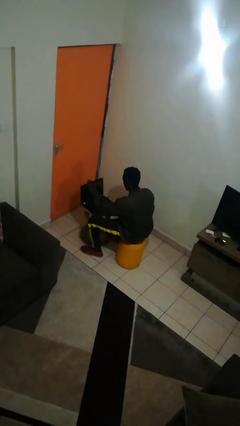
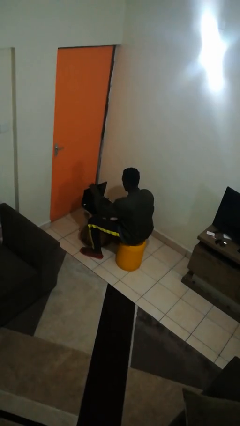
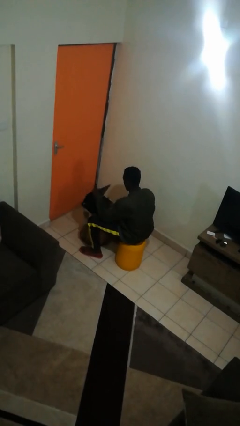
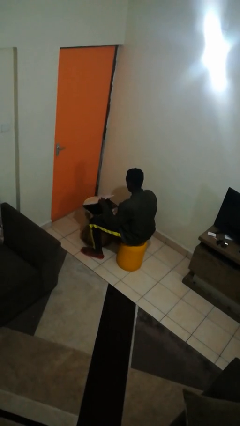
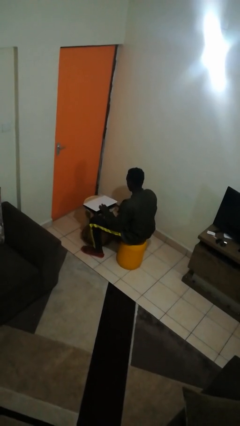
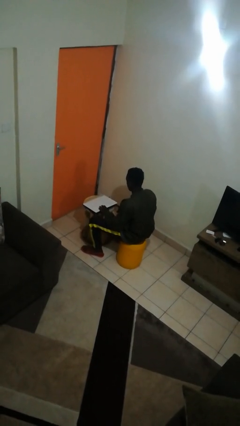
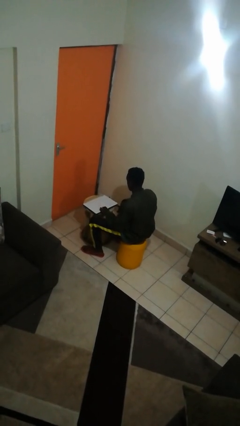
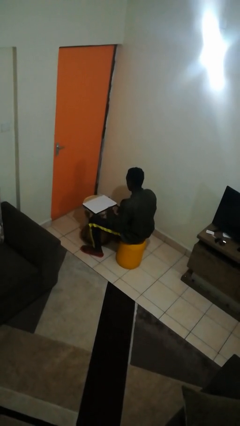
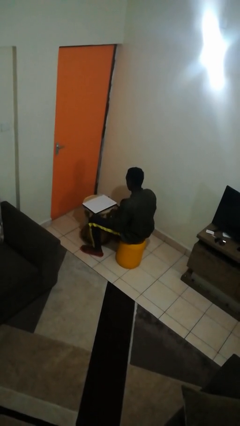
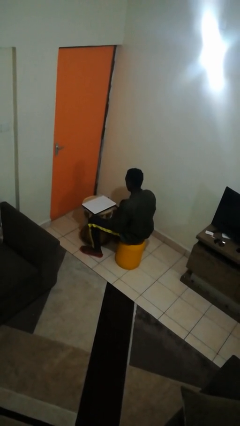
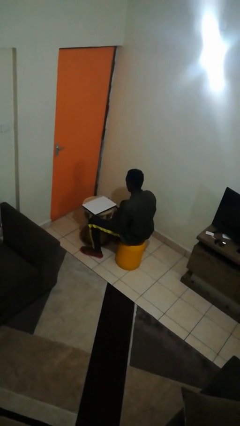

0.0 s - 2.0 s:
person closes laptop

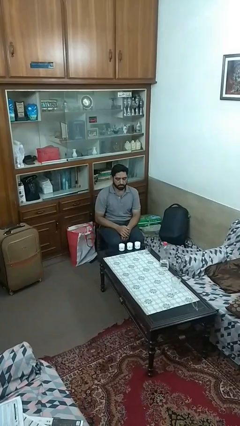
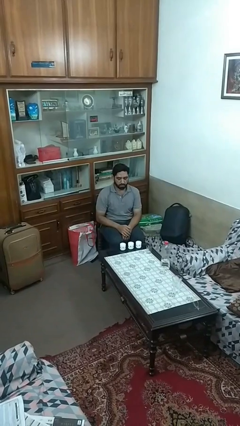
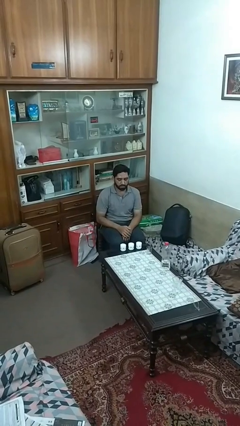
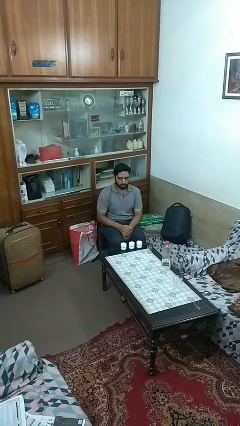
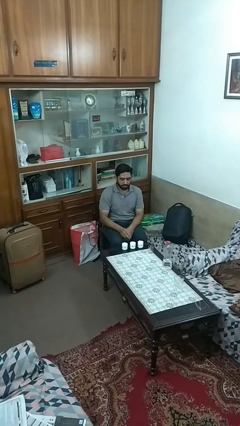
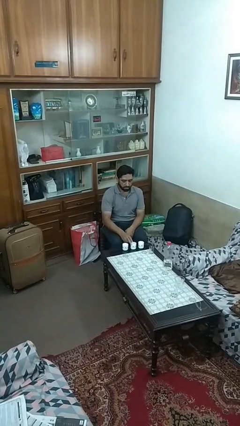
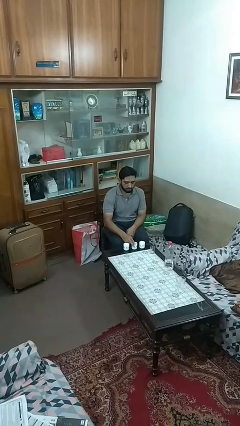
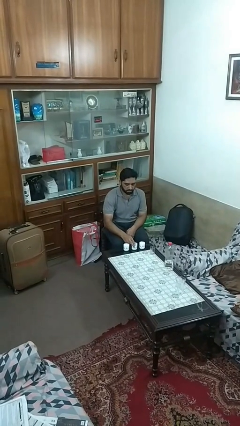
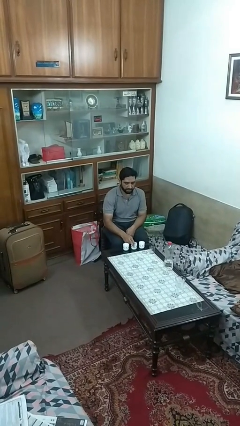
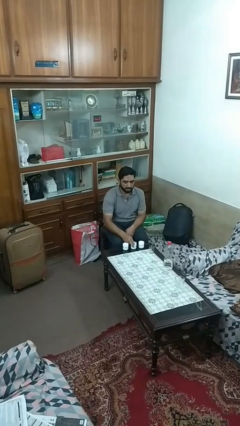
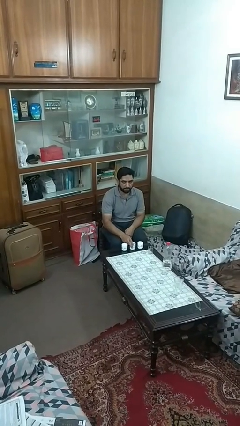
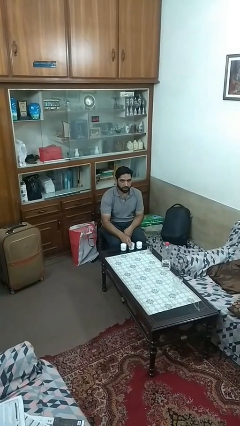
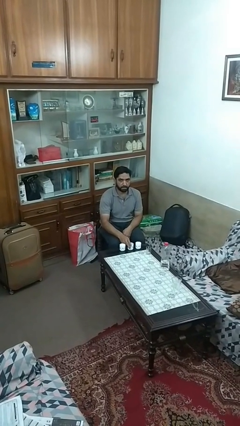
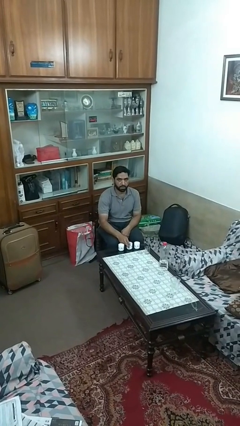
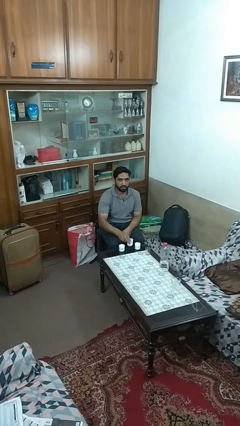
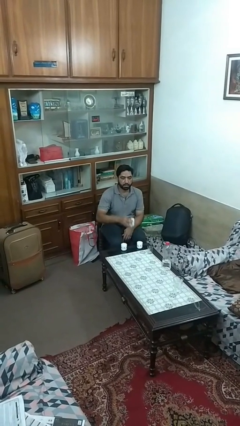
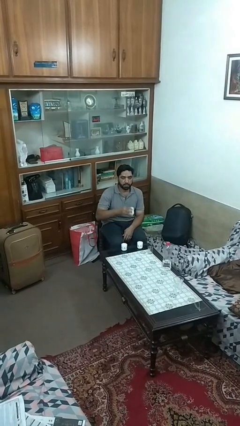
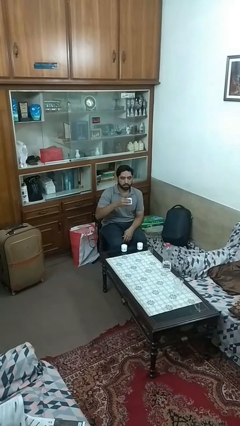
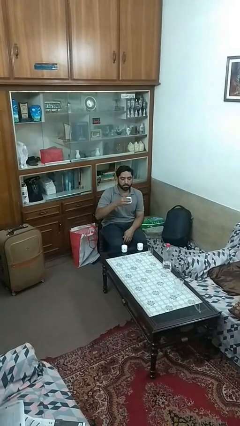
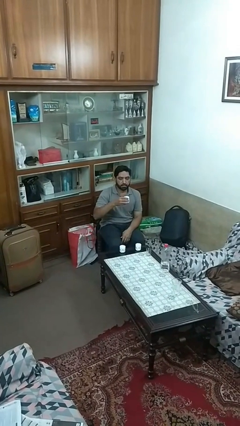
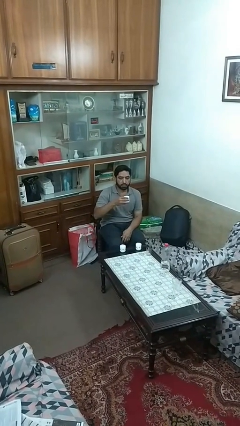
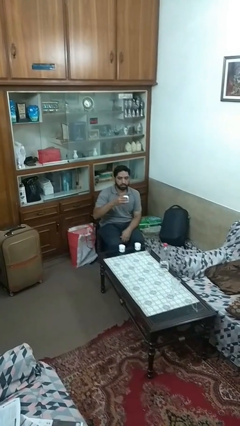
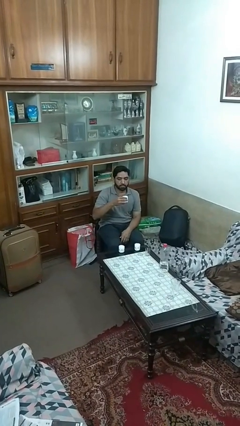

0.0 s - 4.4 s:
person picks up object from table

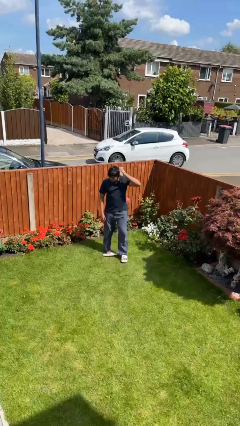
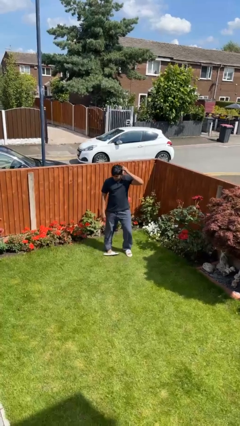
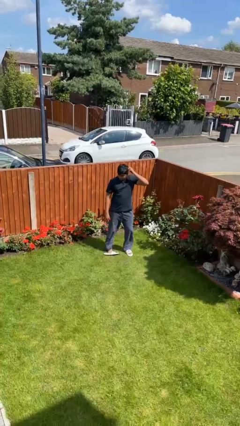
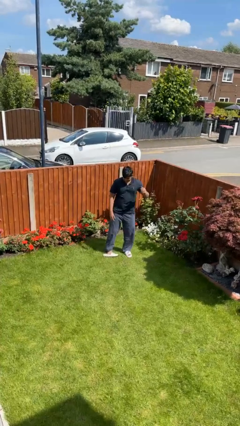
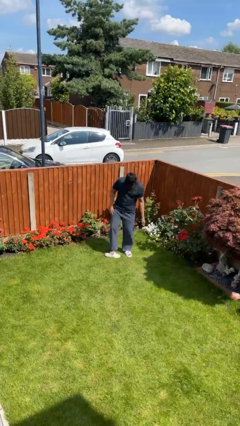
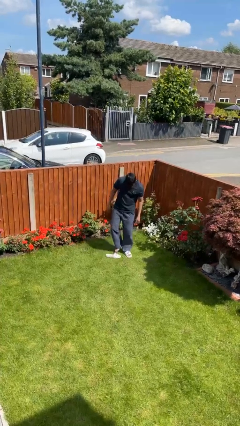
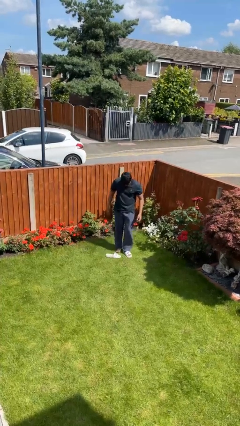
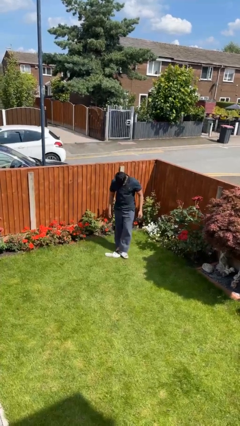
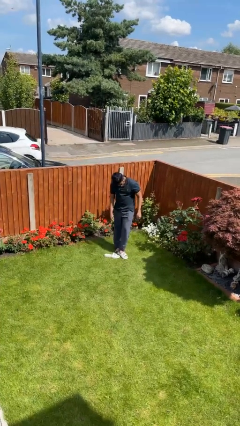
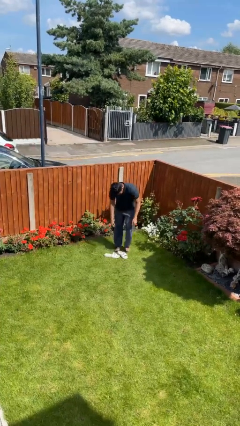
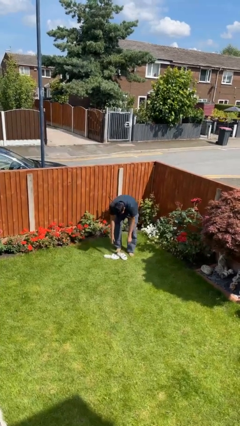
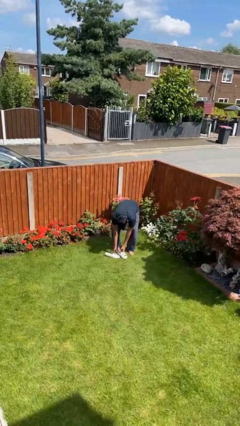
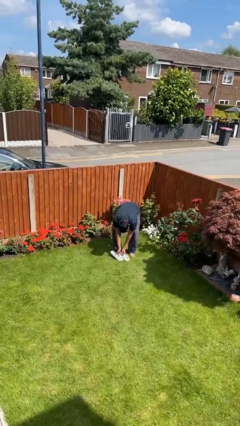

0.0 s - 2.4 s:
person takes off shoes

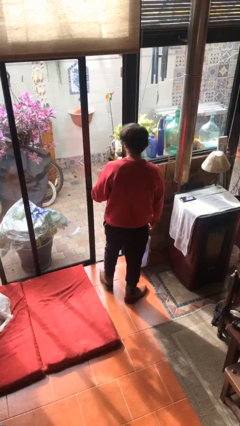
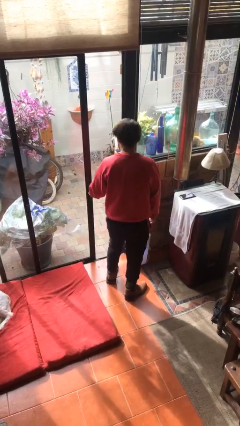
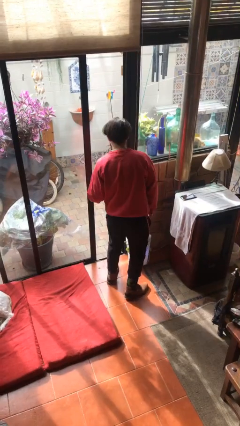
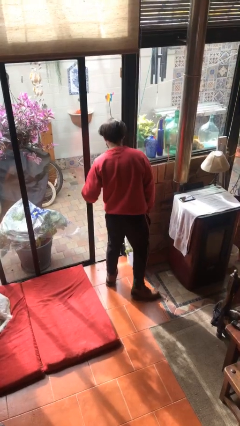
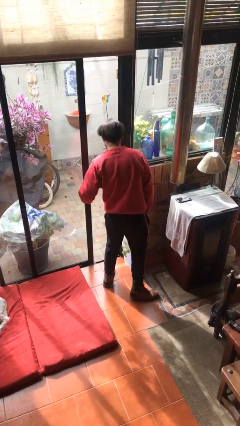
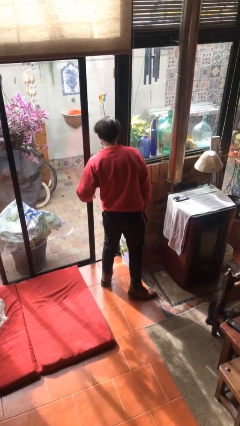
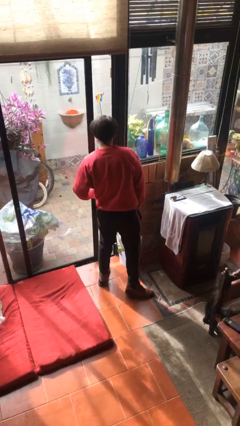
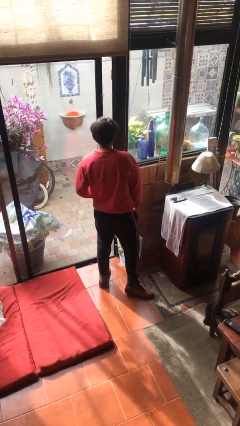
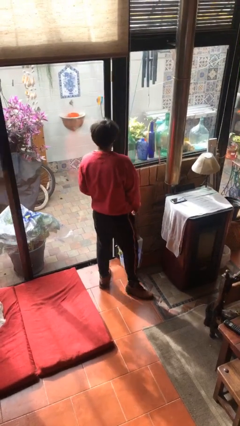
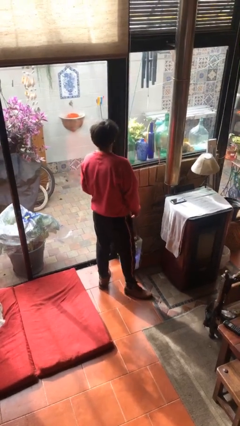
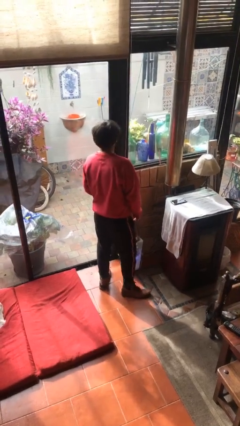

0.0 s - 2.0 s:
person closes sliding door

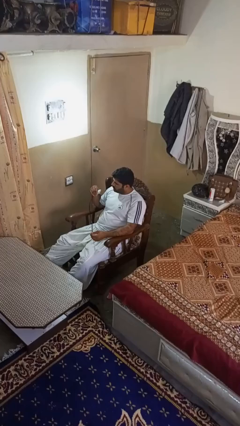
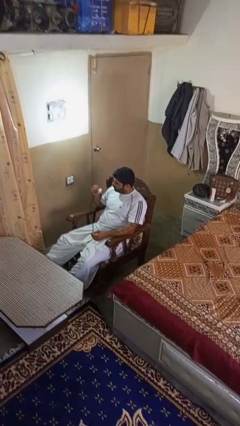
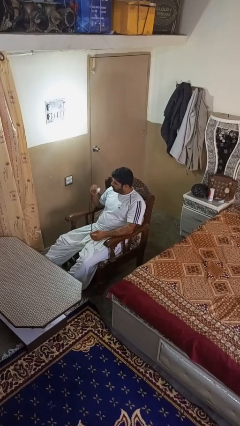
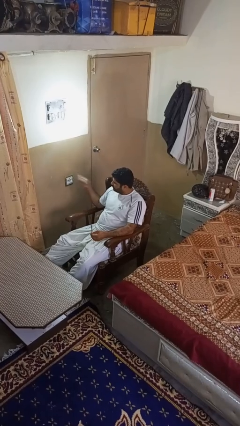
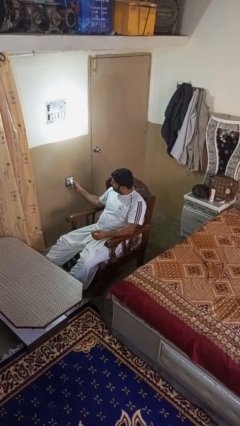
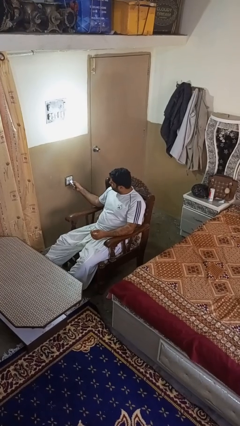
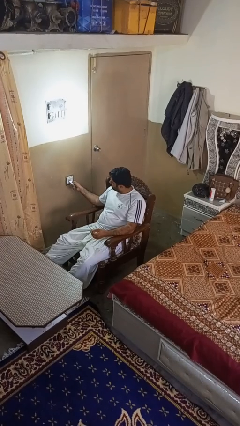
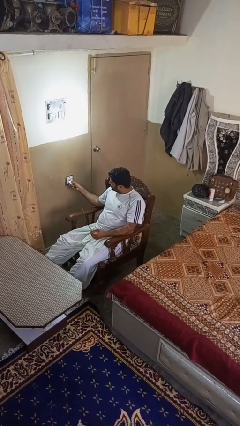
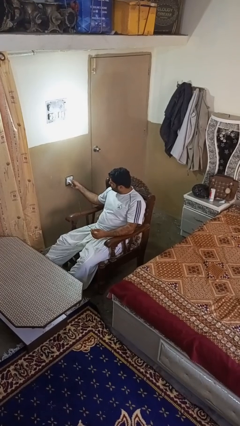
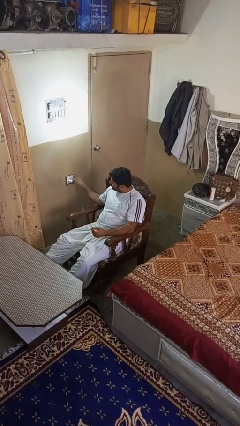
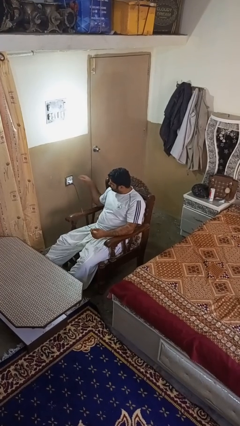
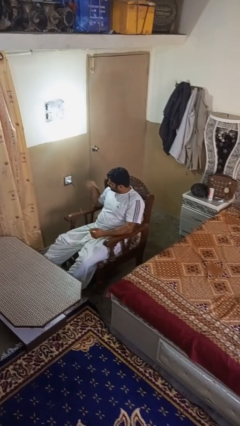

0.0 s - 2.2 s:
person plugs into electrical socket

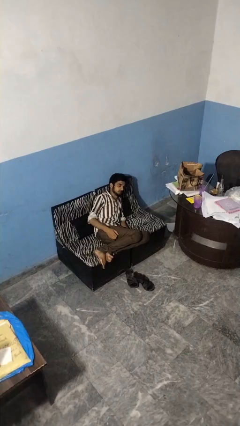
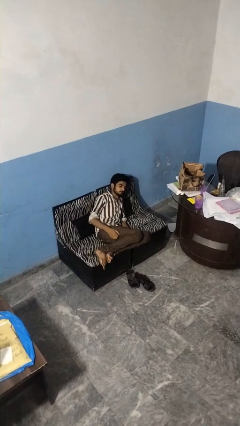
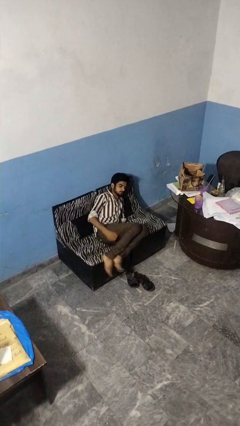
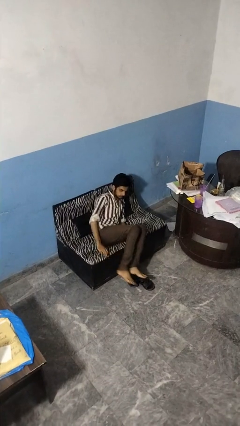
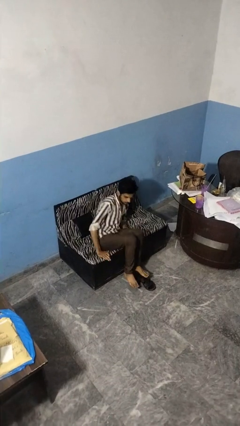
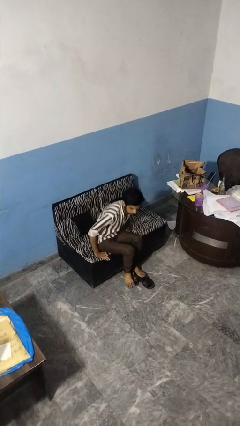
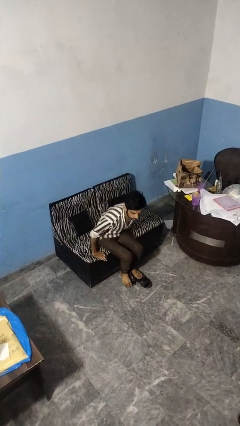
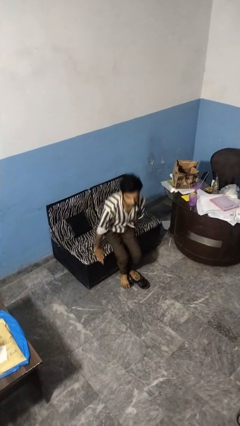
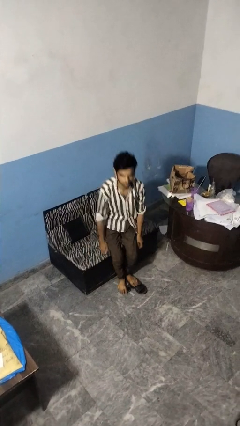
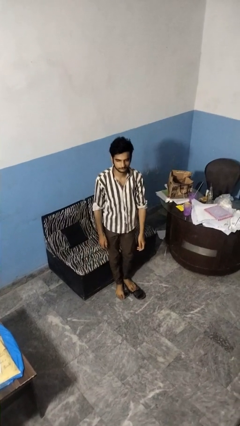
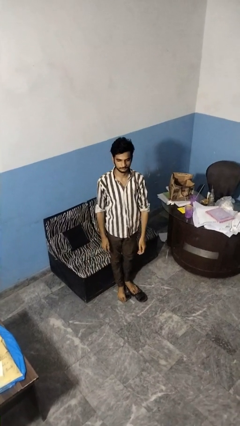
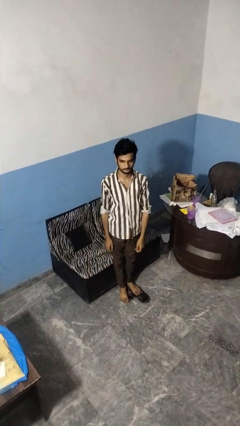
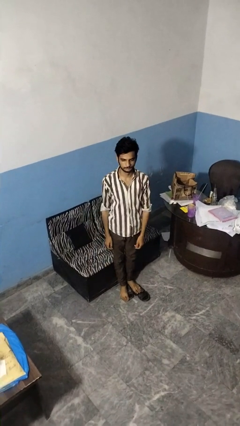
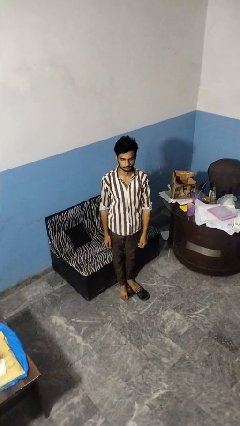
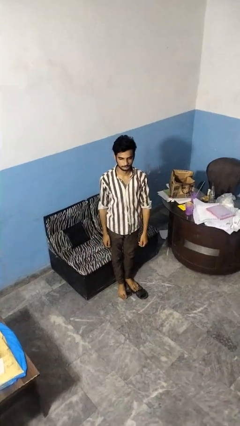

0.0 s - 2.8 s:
person stands up

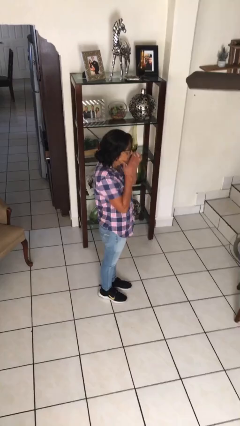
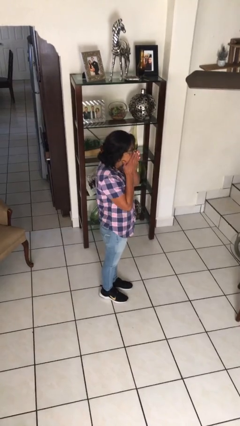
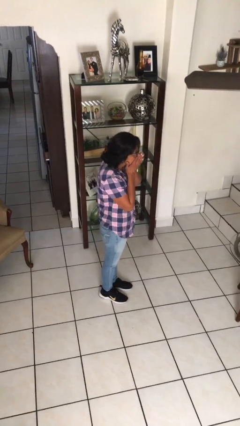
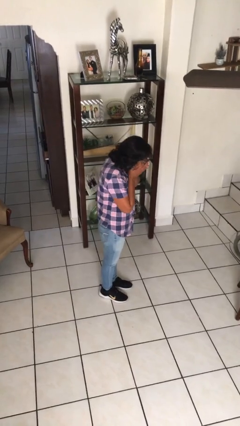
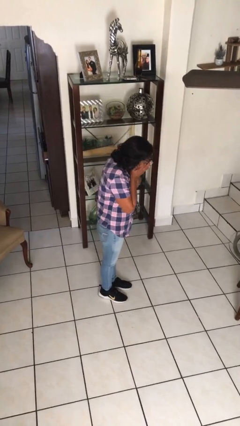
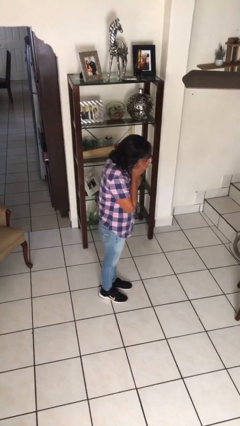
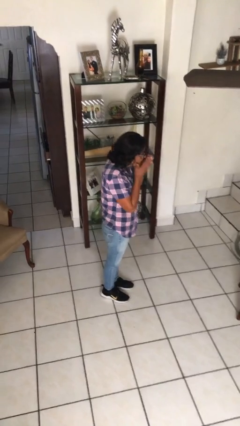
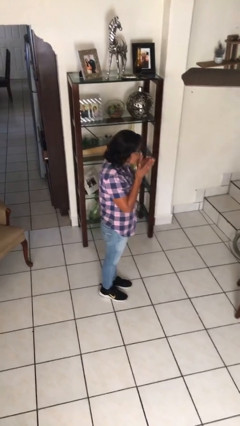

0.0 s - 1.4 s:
person sneezes into hand
